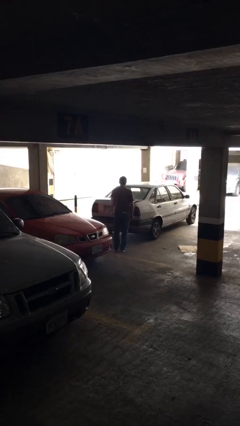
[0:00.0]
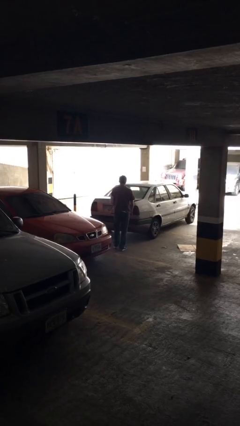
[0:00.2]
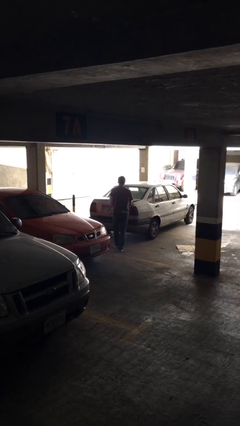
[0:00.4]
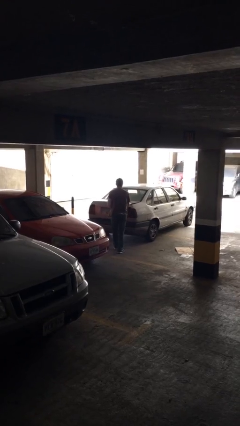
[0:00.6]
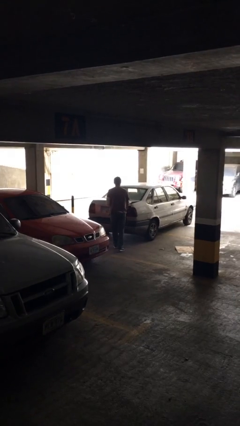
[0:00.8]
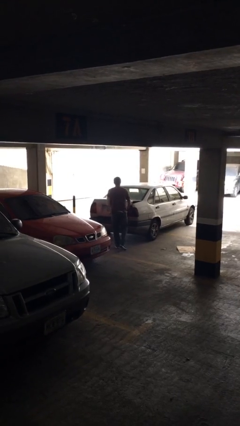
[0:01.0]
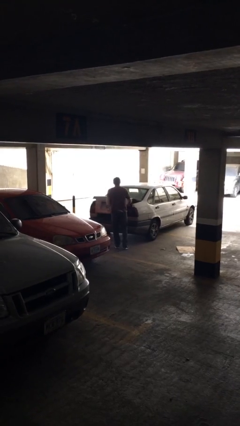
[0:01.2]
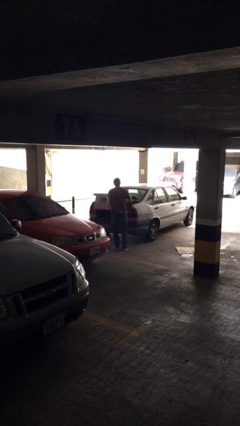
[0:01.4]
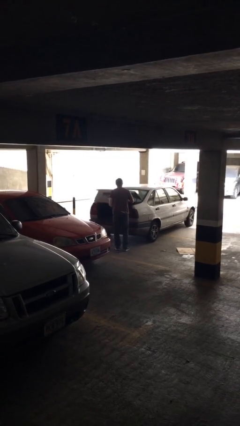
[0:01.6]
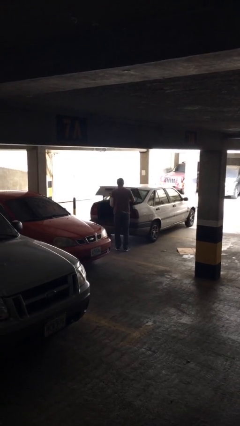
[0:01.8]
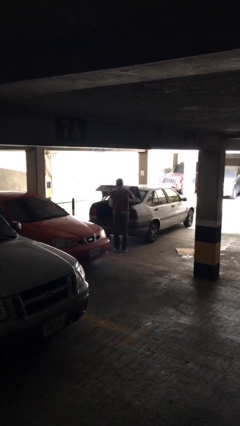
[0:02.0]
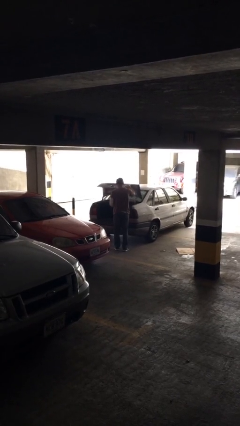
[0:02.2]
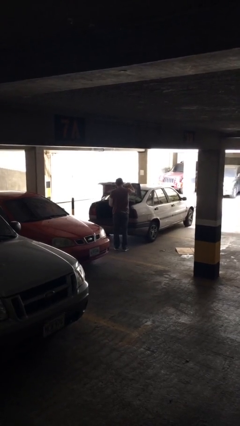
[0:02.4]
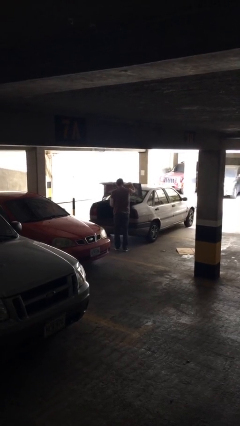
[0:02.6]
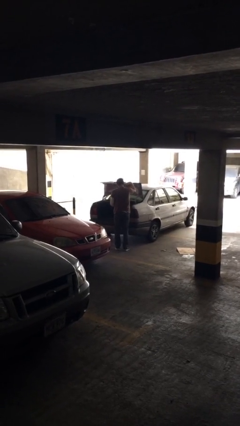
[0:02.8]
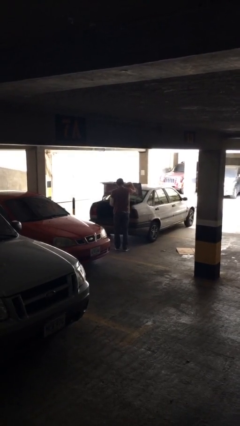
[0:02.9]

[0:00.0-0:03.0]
person opens car trunk

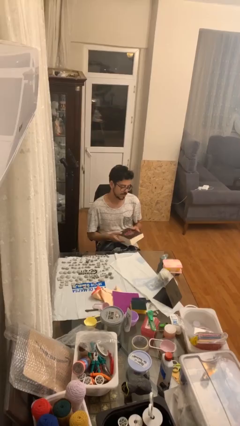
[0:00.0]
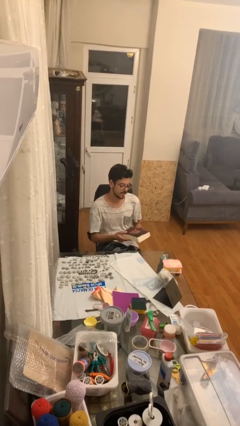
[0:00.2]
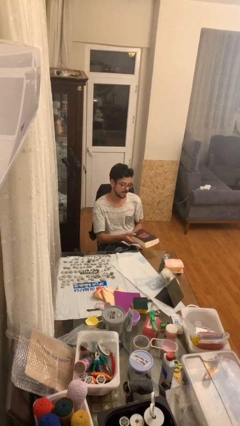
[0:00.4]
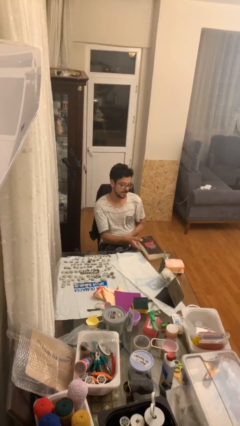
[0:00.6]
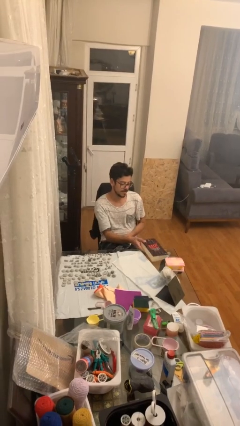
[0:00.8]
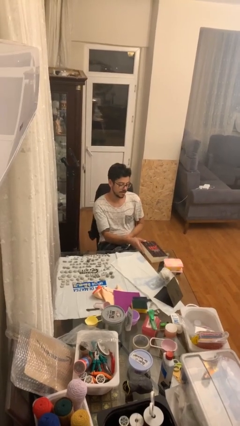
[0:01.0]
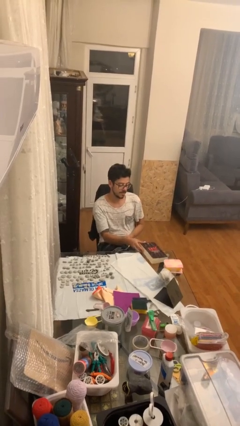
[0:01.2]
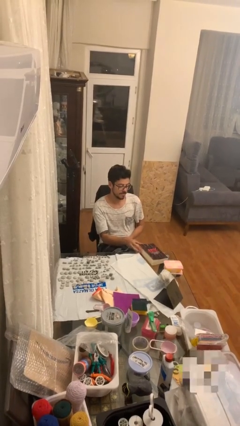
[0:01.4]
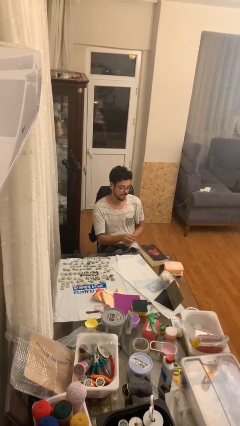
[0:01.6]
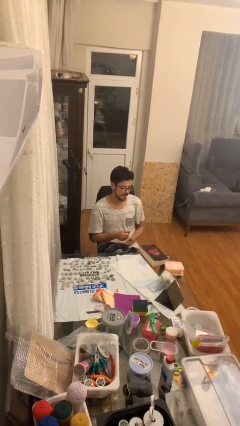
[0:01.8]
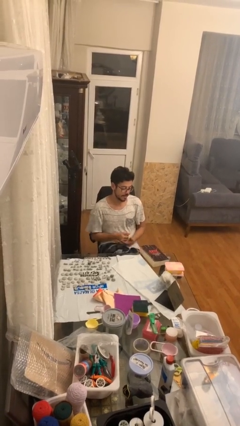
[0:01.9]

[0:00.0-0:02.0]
person puts down object on table

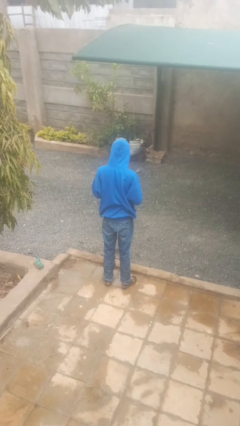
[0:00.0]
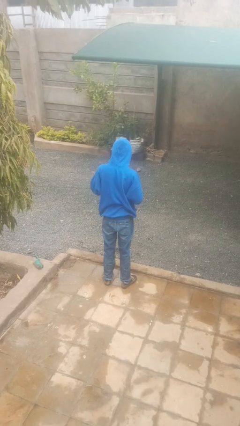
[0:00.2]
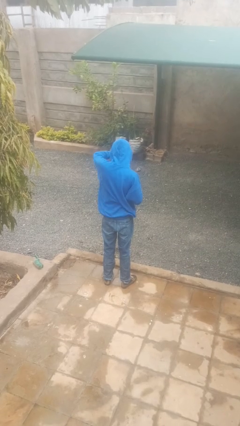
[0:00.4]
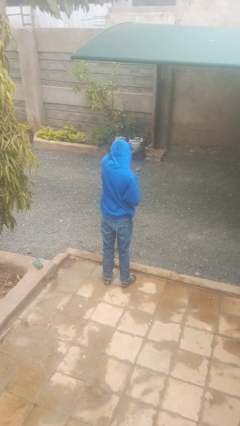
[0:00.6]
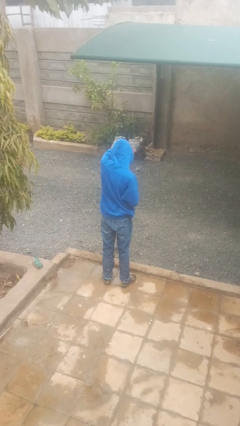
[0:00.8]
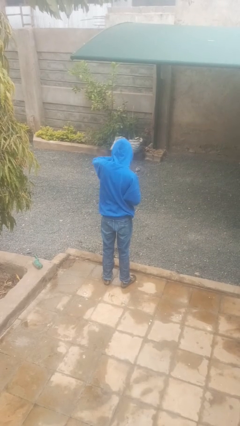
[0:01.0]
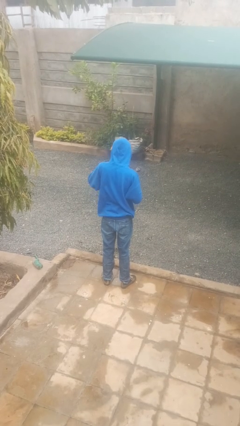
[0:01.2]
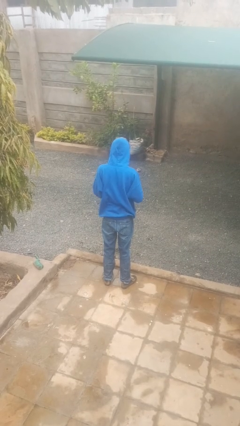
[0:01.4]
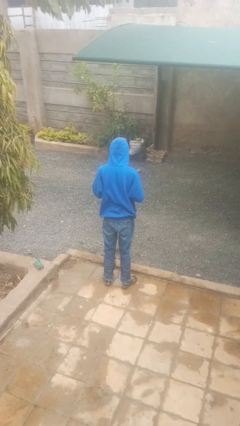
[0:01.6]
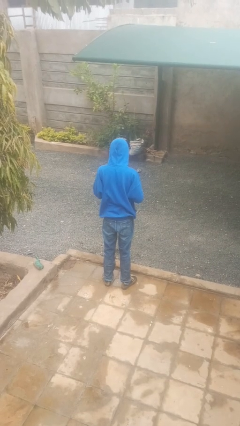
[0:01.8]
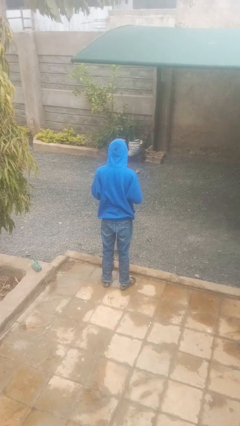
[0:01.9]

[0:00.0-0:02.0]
person punches

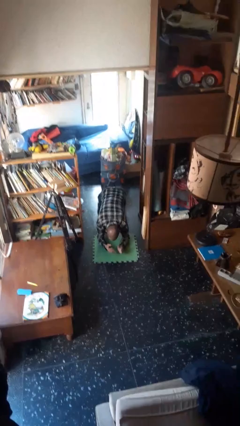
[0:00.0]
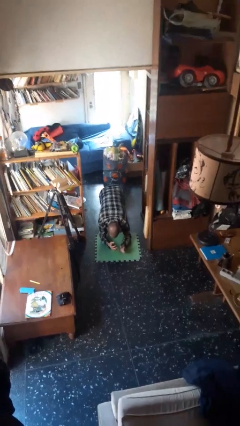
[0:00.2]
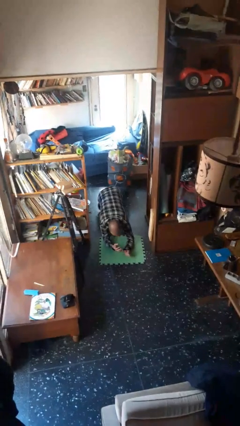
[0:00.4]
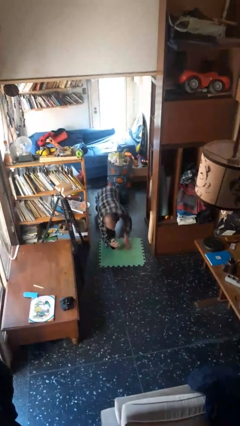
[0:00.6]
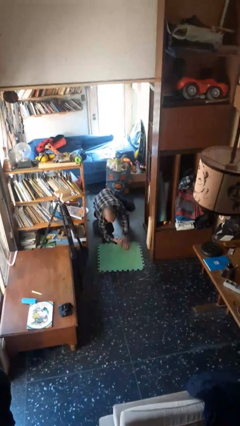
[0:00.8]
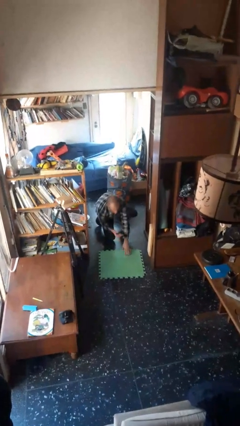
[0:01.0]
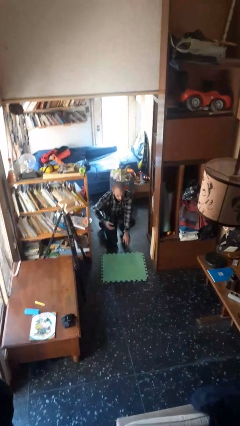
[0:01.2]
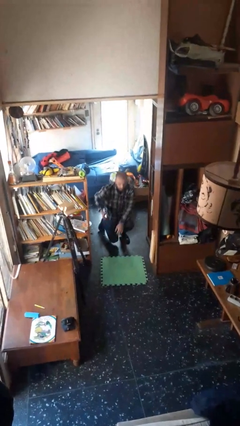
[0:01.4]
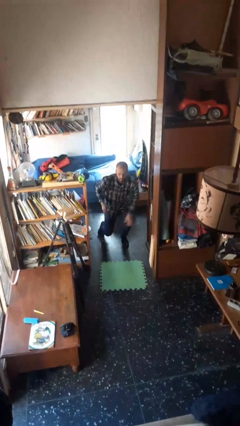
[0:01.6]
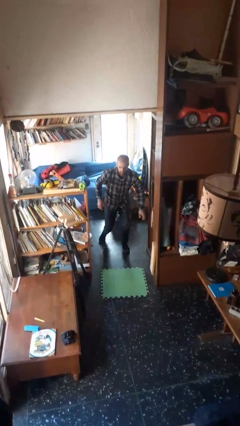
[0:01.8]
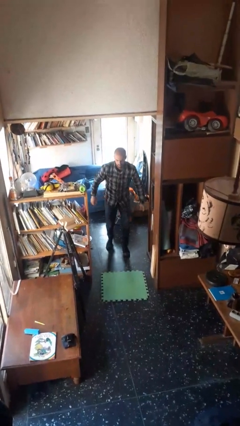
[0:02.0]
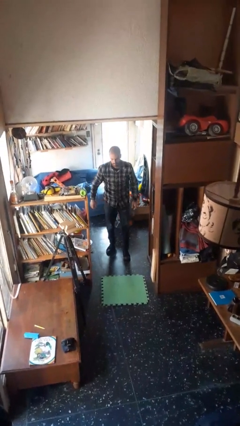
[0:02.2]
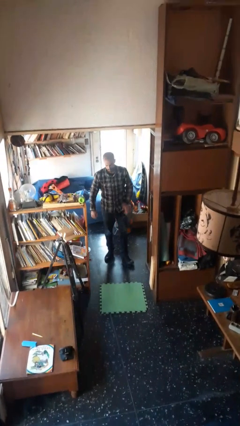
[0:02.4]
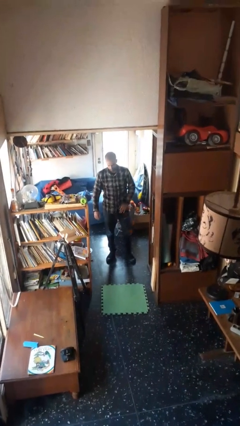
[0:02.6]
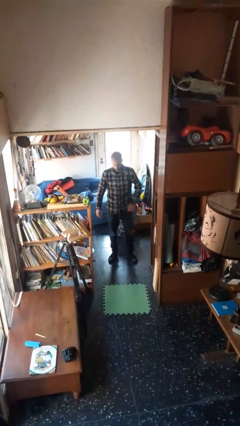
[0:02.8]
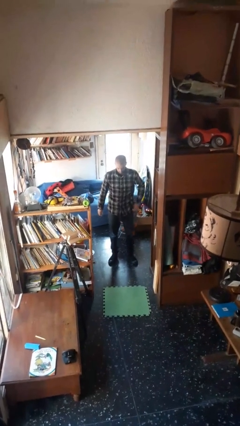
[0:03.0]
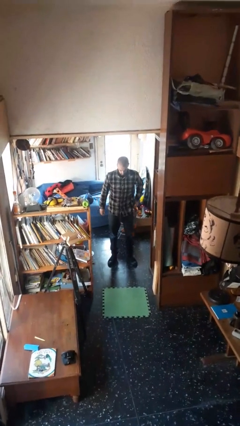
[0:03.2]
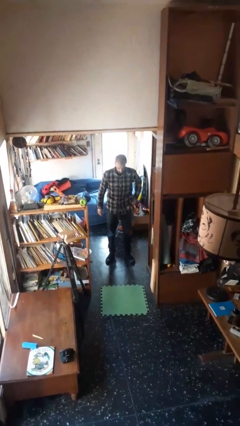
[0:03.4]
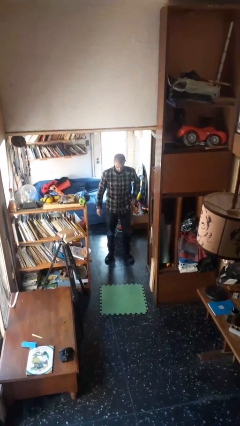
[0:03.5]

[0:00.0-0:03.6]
person stands up from floor

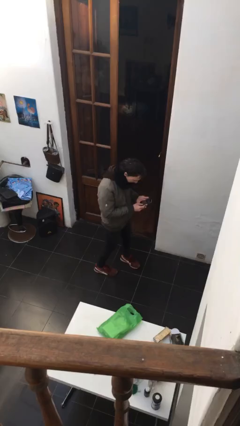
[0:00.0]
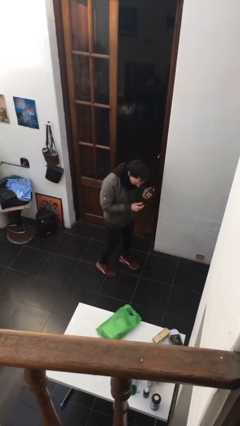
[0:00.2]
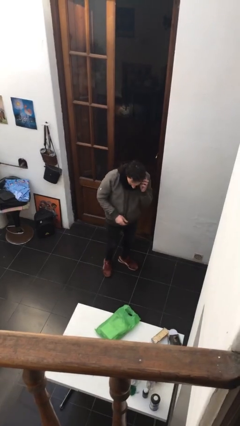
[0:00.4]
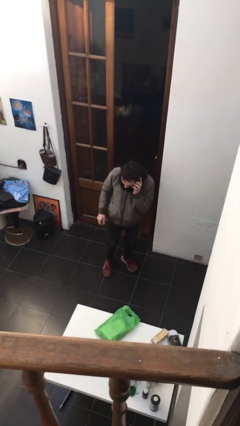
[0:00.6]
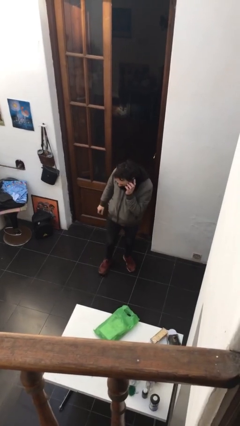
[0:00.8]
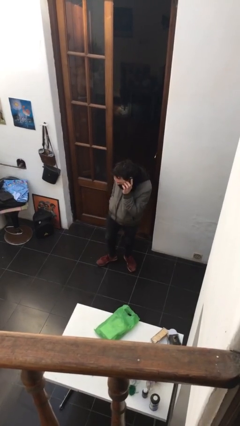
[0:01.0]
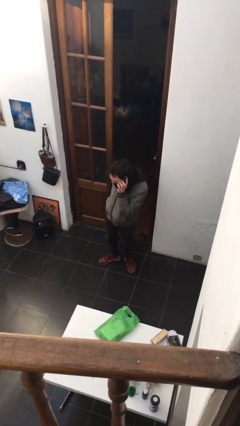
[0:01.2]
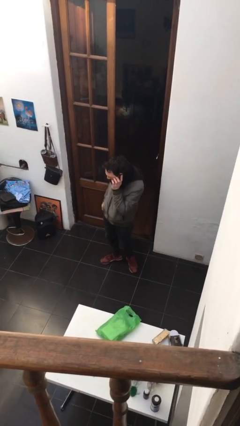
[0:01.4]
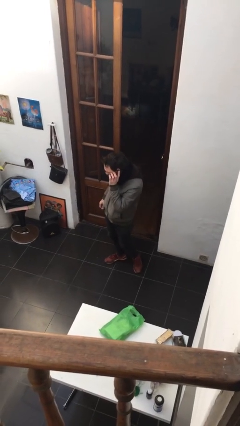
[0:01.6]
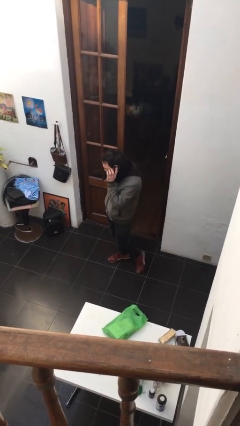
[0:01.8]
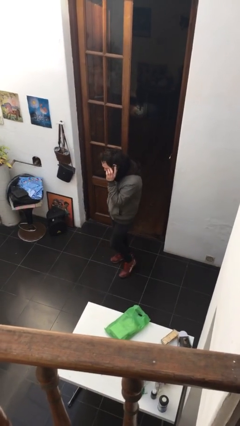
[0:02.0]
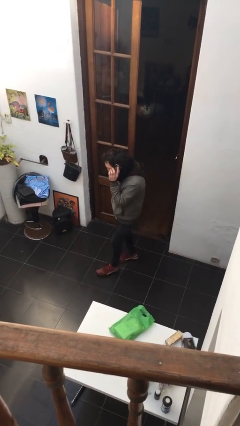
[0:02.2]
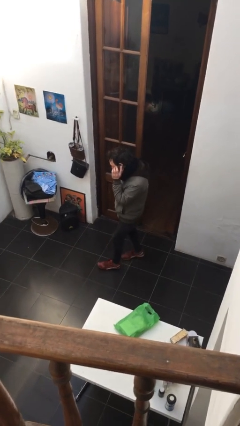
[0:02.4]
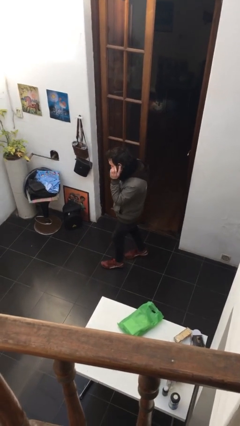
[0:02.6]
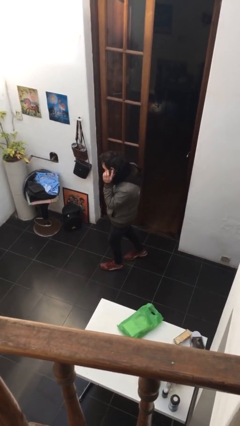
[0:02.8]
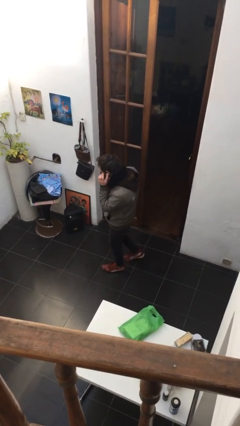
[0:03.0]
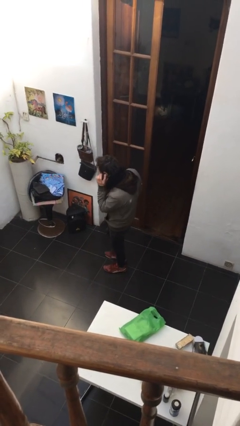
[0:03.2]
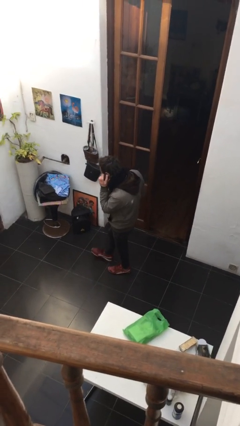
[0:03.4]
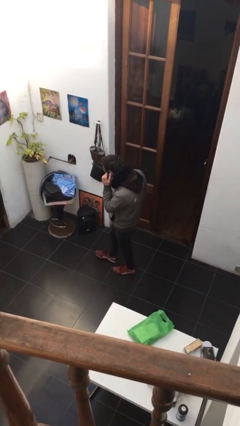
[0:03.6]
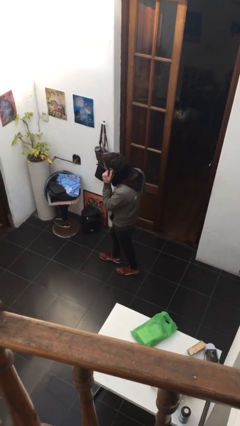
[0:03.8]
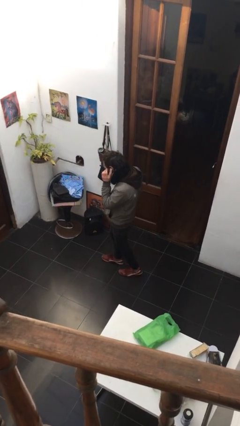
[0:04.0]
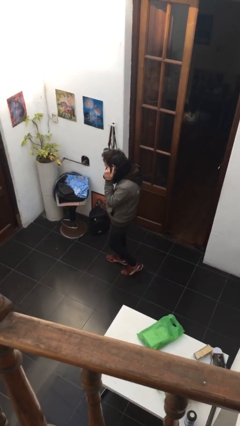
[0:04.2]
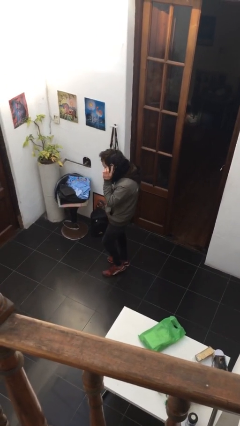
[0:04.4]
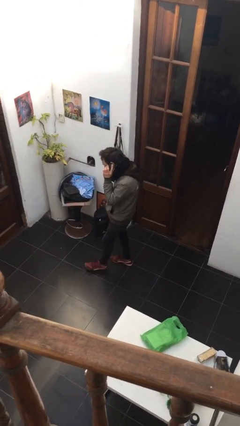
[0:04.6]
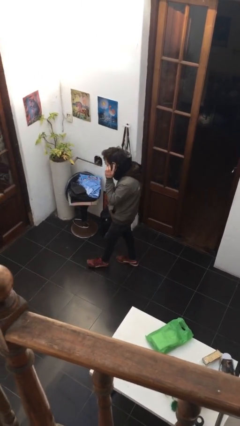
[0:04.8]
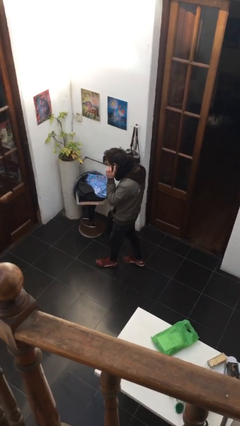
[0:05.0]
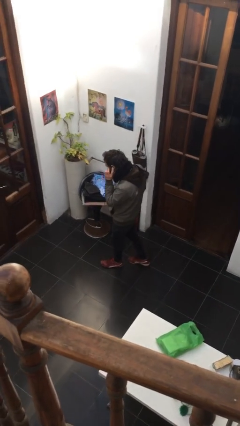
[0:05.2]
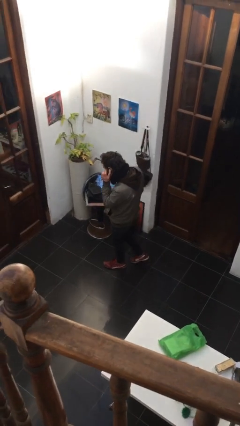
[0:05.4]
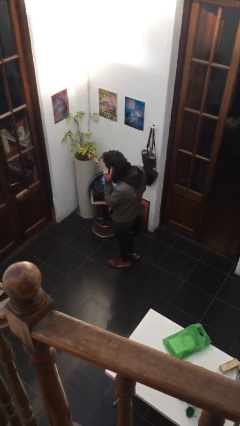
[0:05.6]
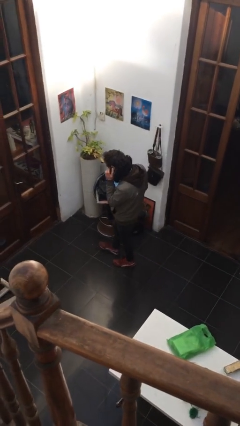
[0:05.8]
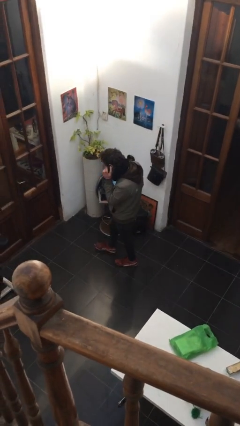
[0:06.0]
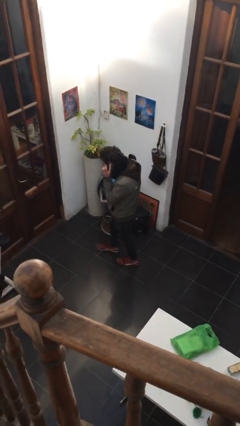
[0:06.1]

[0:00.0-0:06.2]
person talks on phone

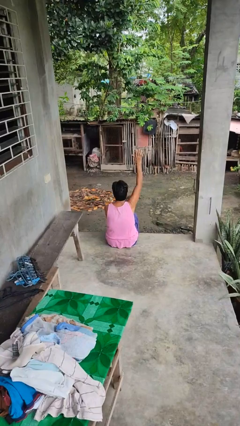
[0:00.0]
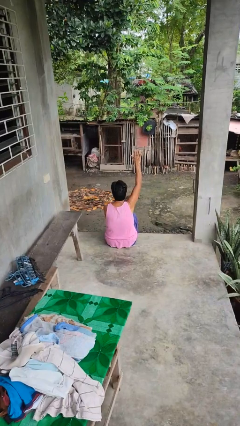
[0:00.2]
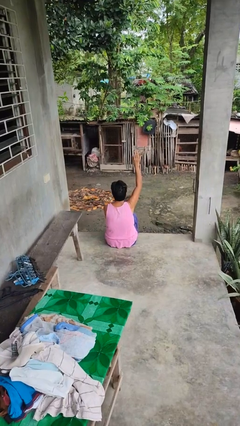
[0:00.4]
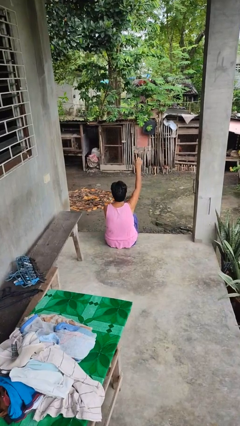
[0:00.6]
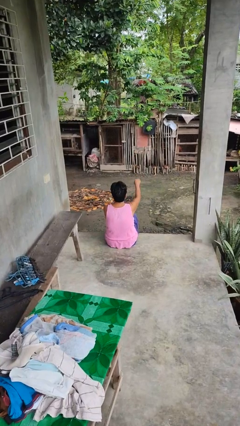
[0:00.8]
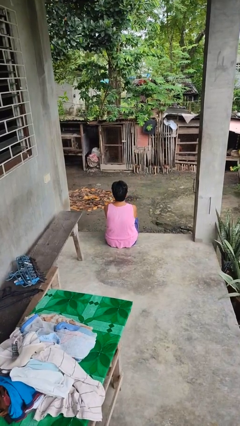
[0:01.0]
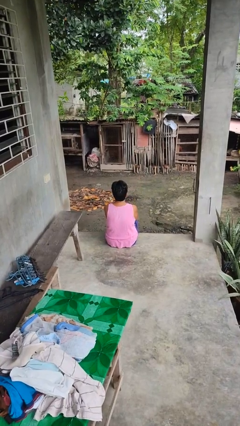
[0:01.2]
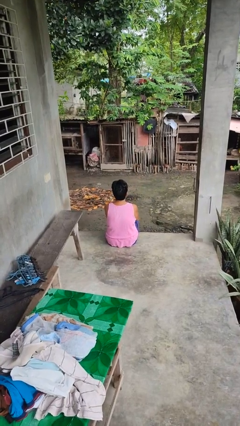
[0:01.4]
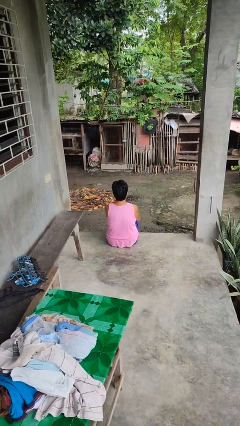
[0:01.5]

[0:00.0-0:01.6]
person gestures lower hand
